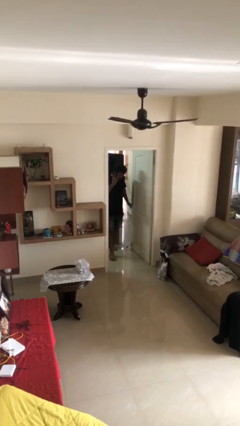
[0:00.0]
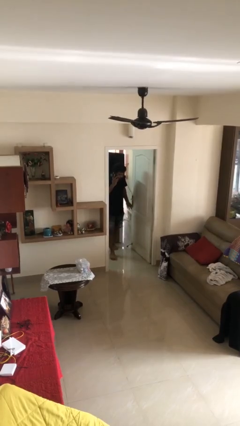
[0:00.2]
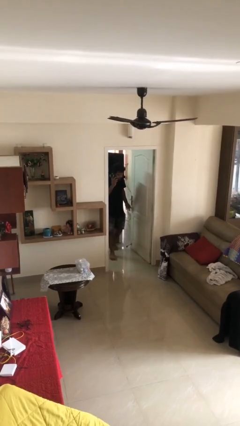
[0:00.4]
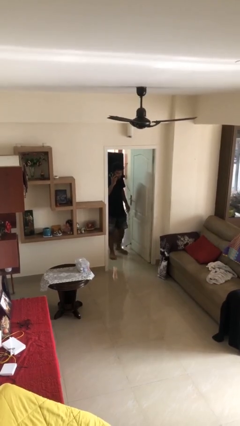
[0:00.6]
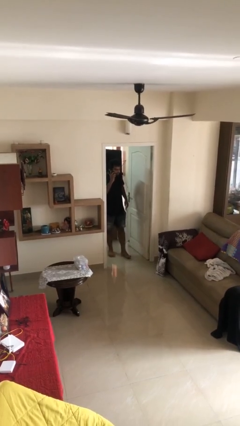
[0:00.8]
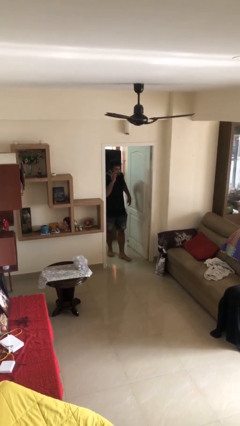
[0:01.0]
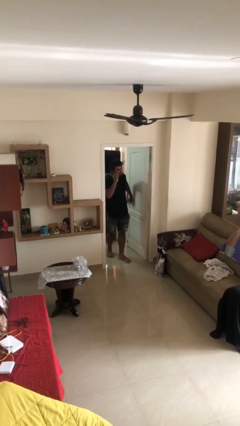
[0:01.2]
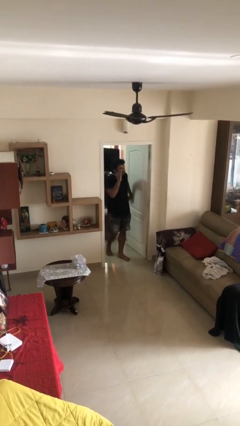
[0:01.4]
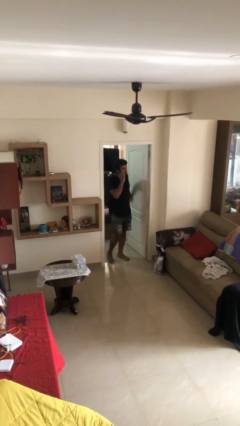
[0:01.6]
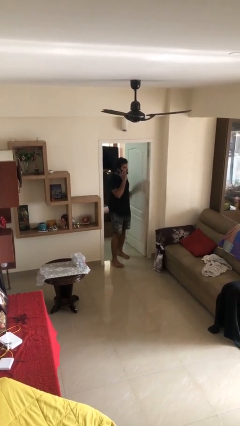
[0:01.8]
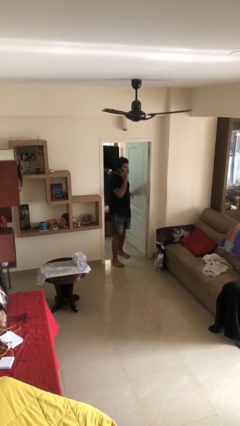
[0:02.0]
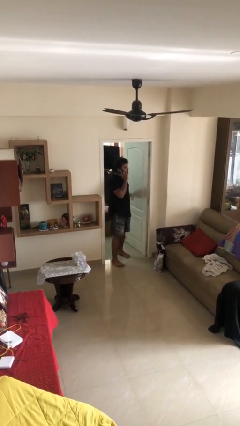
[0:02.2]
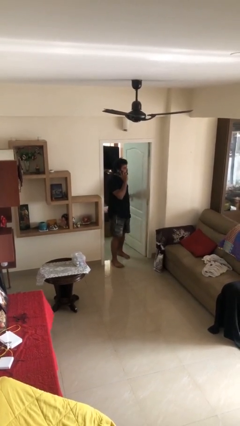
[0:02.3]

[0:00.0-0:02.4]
person enters scene through structure

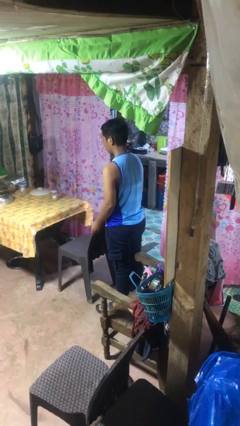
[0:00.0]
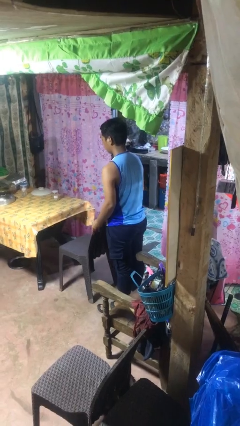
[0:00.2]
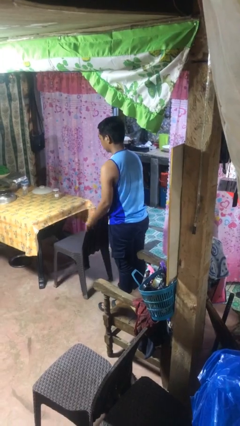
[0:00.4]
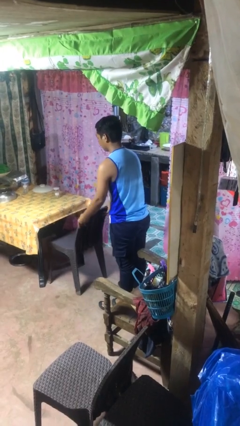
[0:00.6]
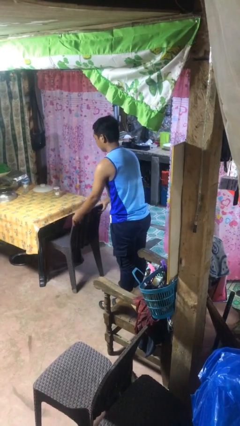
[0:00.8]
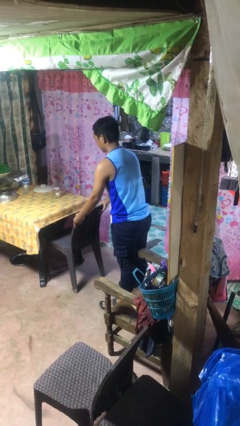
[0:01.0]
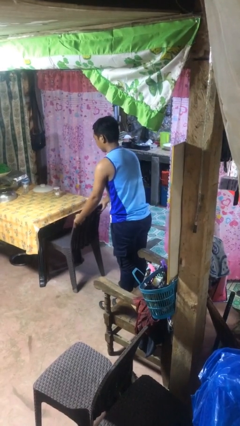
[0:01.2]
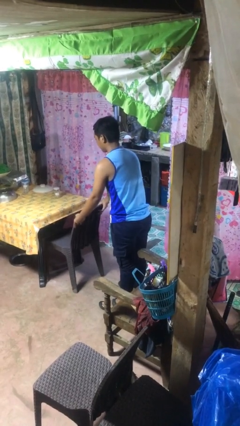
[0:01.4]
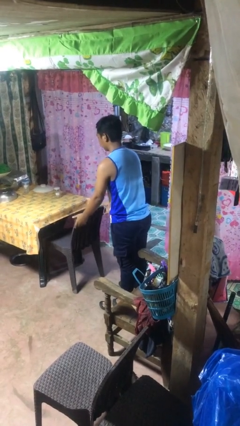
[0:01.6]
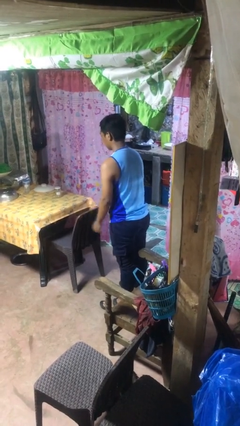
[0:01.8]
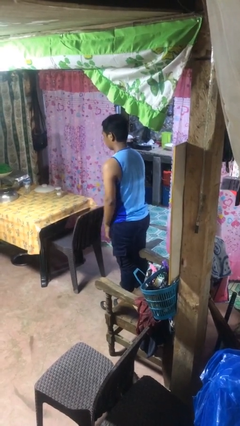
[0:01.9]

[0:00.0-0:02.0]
person pushes in chair

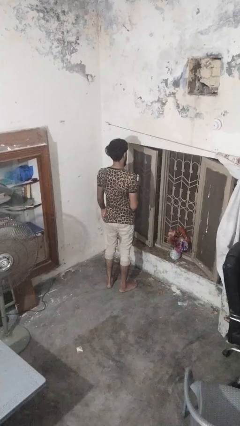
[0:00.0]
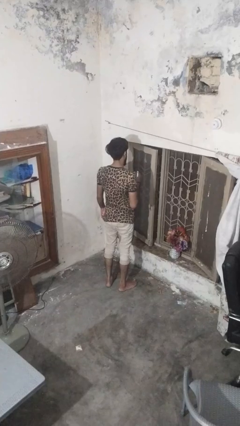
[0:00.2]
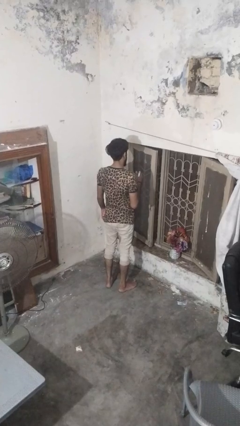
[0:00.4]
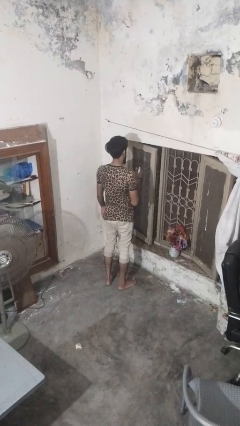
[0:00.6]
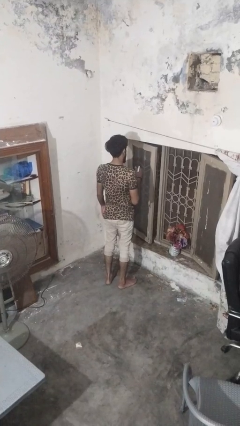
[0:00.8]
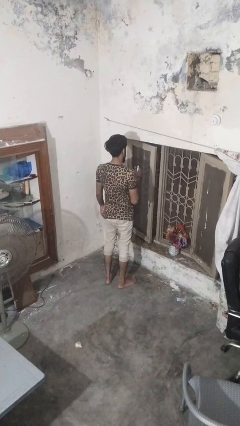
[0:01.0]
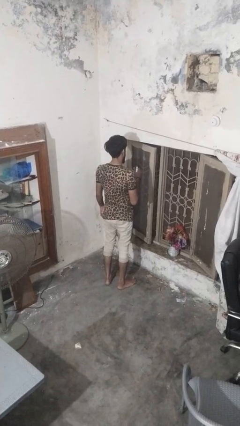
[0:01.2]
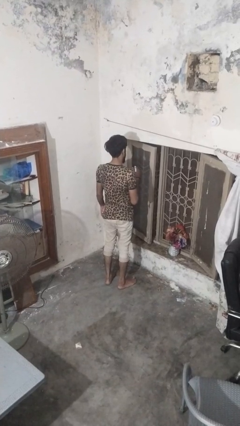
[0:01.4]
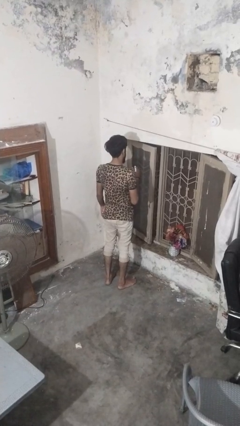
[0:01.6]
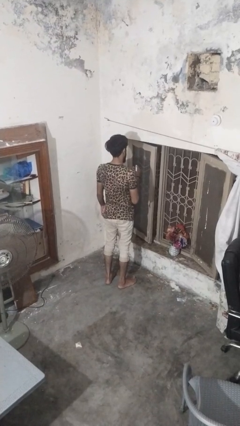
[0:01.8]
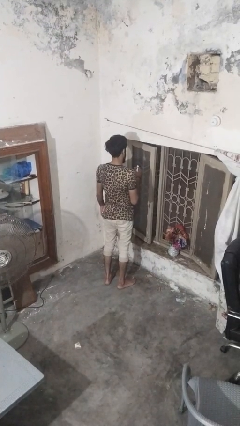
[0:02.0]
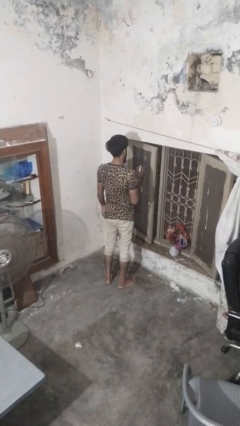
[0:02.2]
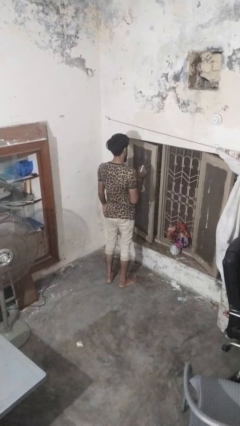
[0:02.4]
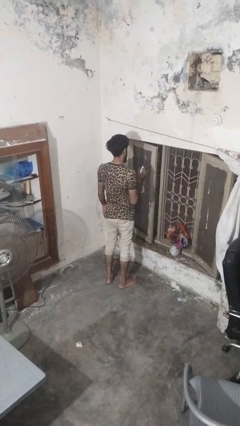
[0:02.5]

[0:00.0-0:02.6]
person sprays from bottle

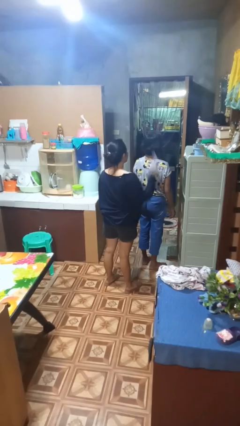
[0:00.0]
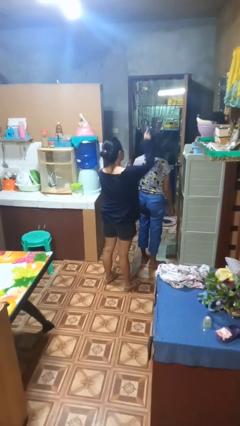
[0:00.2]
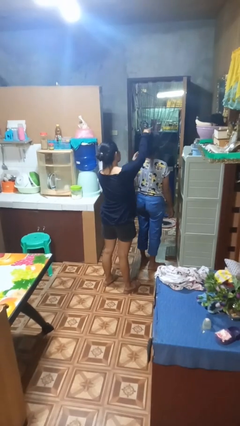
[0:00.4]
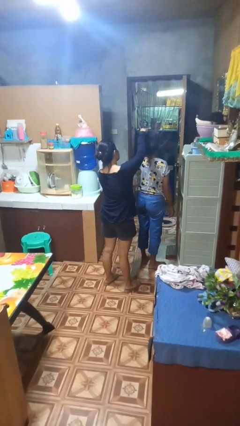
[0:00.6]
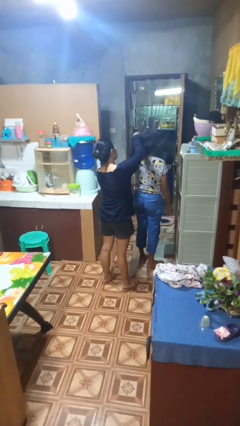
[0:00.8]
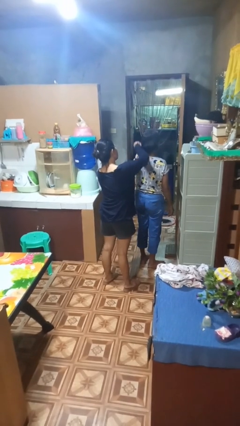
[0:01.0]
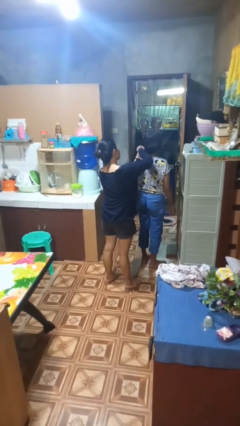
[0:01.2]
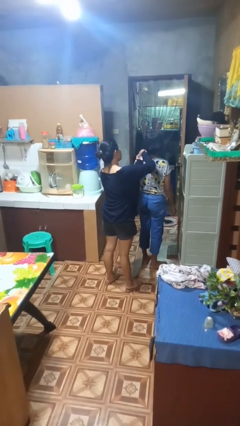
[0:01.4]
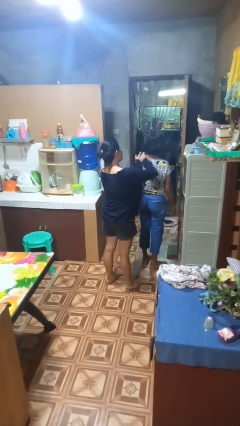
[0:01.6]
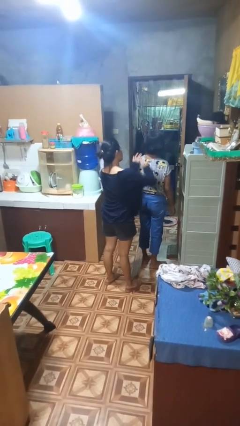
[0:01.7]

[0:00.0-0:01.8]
person brushes hair of person

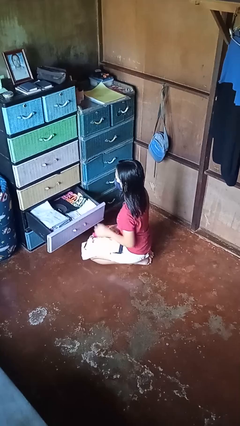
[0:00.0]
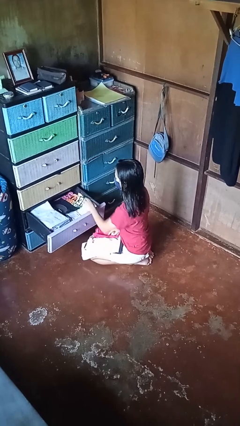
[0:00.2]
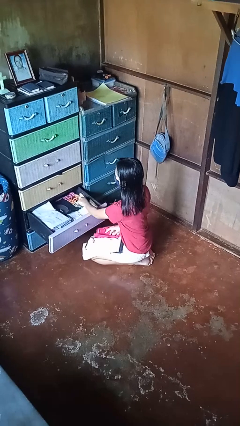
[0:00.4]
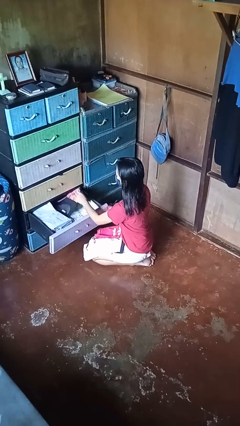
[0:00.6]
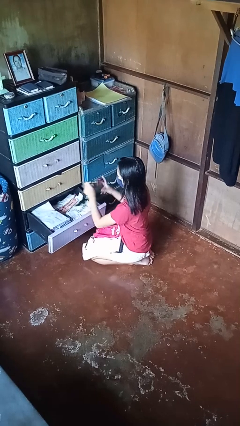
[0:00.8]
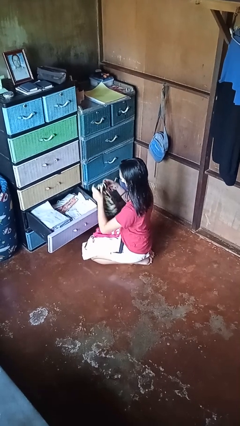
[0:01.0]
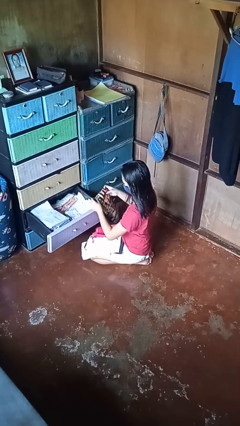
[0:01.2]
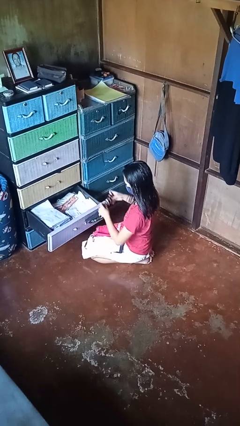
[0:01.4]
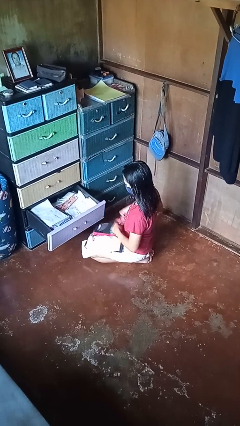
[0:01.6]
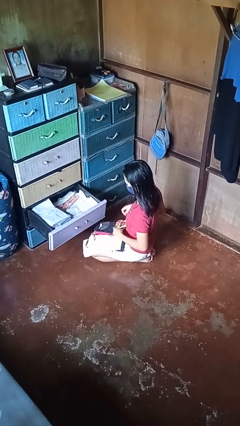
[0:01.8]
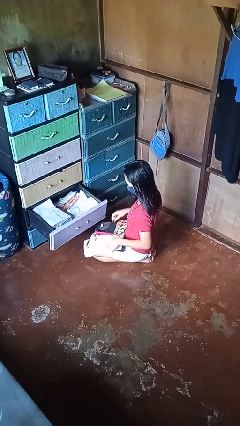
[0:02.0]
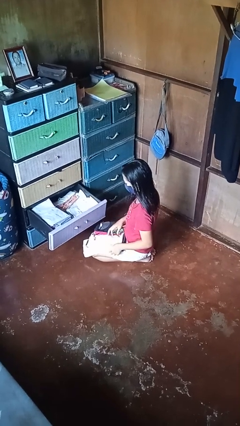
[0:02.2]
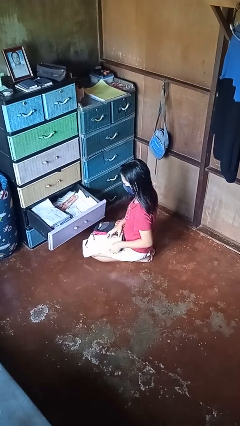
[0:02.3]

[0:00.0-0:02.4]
person takes clothes from dresser

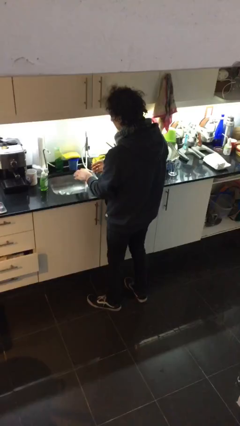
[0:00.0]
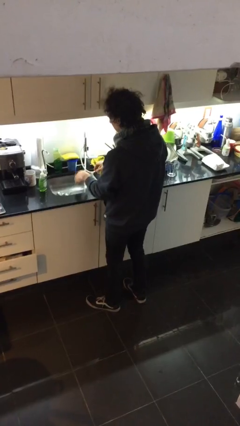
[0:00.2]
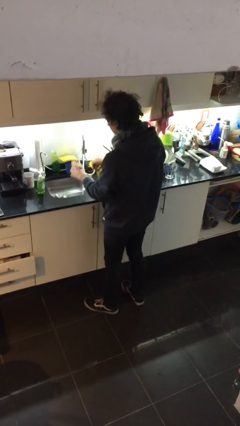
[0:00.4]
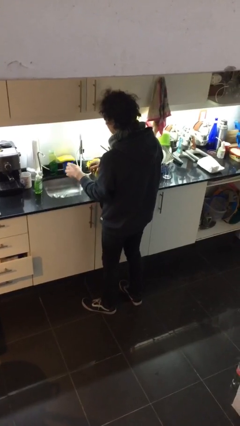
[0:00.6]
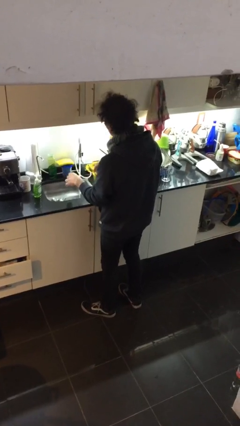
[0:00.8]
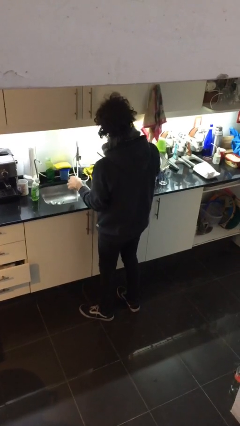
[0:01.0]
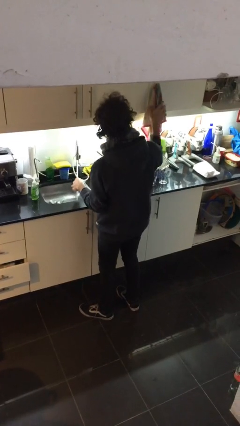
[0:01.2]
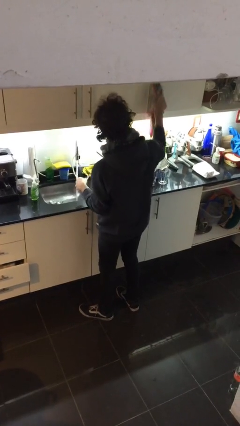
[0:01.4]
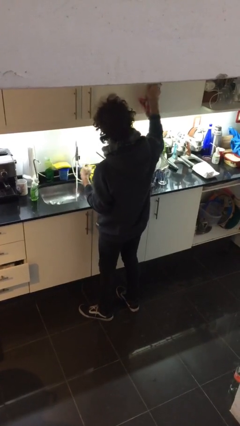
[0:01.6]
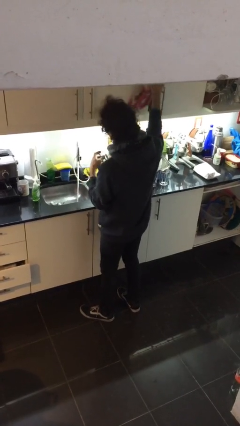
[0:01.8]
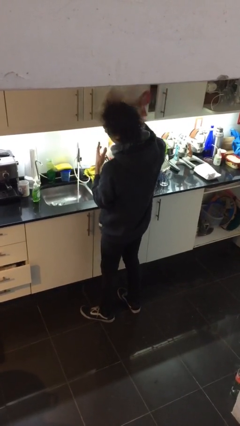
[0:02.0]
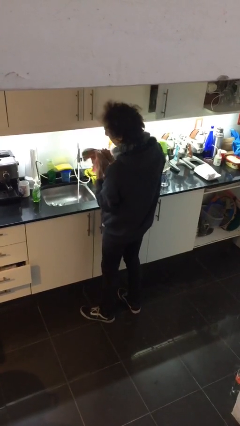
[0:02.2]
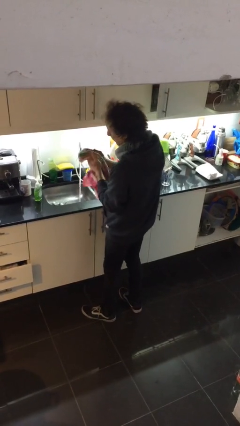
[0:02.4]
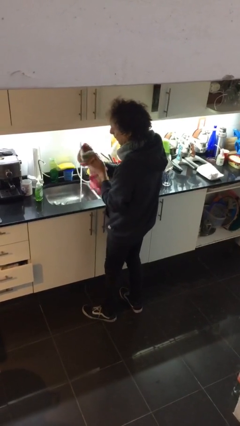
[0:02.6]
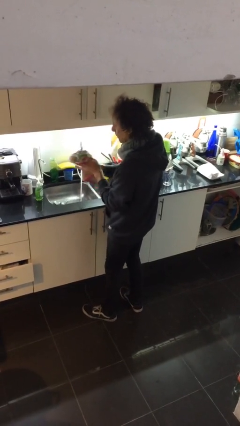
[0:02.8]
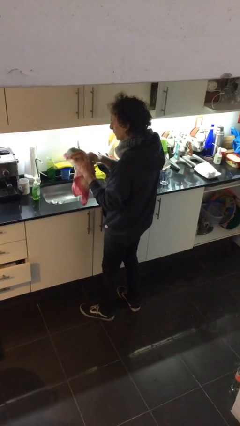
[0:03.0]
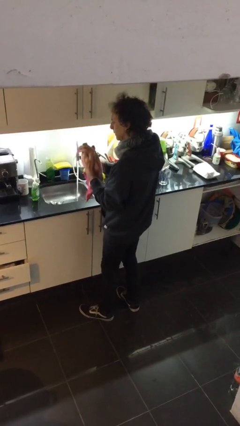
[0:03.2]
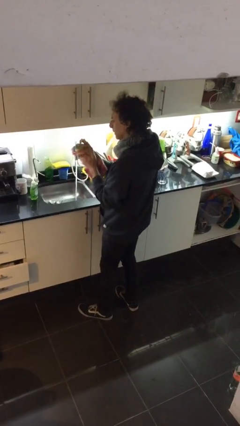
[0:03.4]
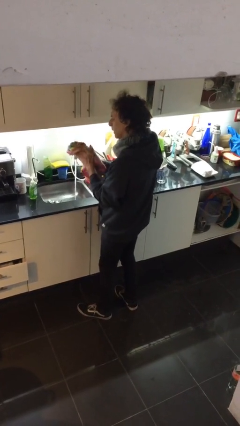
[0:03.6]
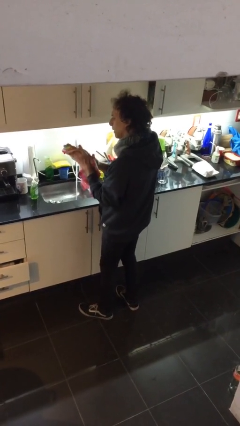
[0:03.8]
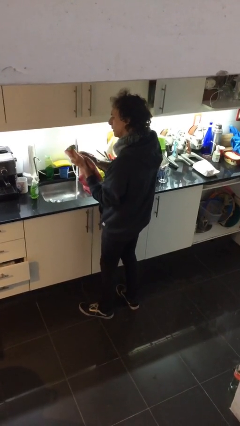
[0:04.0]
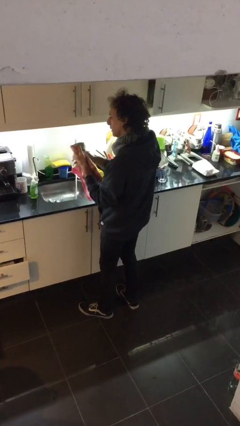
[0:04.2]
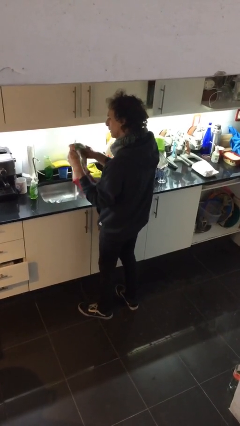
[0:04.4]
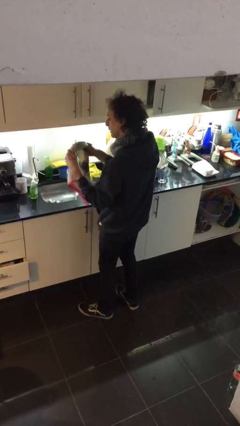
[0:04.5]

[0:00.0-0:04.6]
person dries hands with towel

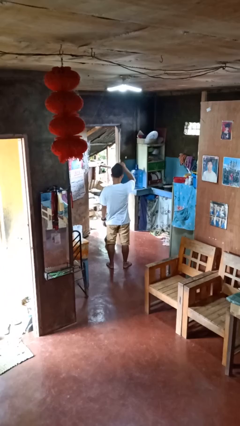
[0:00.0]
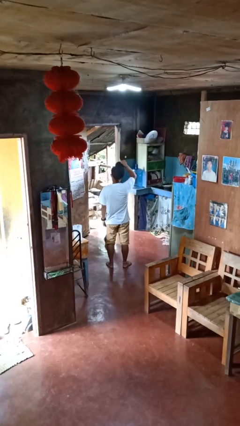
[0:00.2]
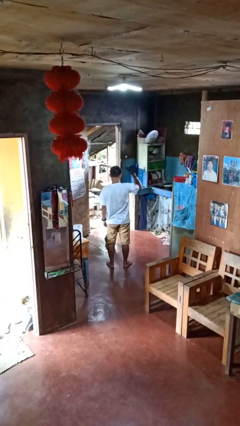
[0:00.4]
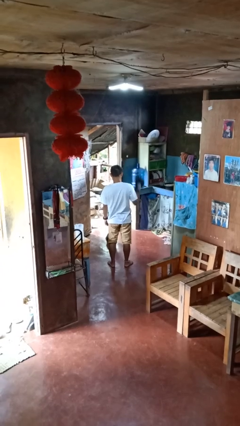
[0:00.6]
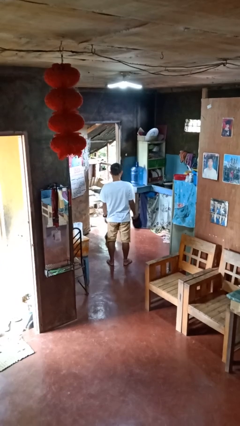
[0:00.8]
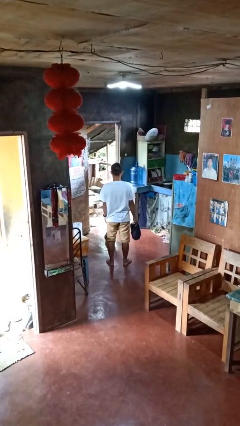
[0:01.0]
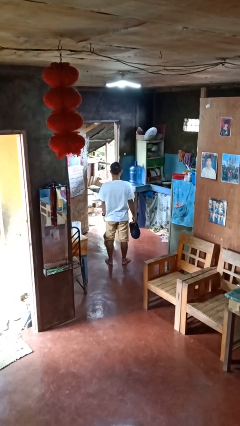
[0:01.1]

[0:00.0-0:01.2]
person takes off hat
